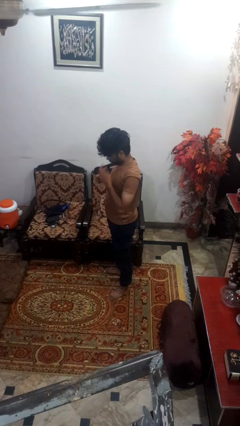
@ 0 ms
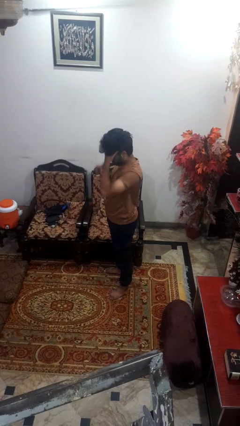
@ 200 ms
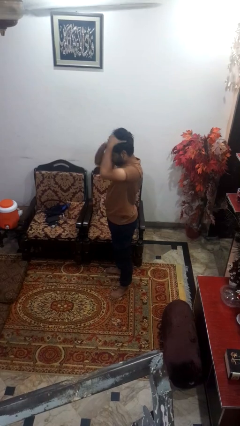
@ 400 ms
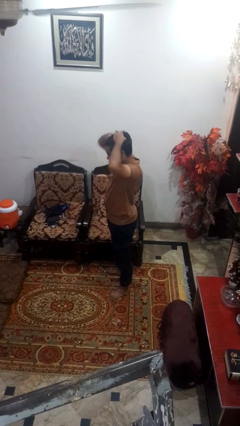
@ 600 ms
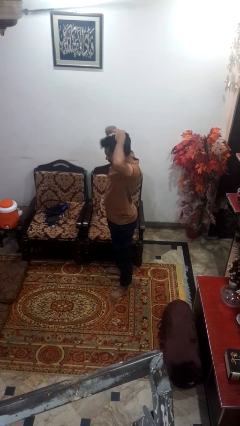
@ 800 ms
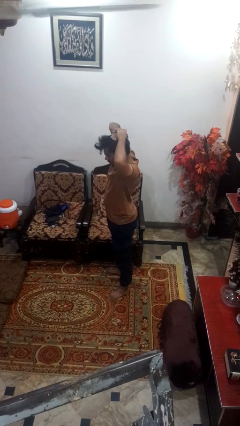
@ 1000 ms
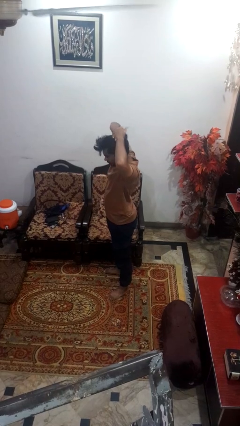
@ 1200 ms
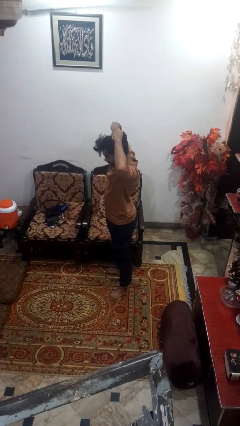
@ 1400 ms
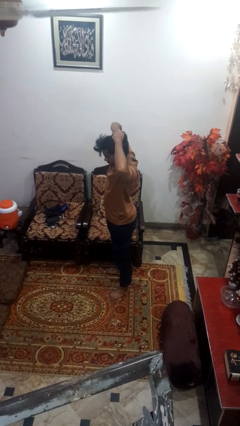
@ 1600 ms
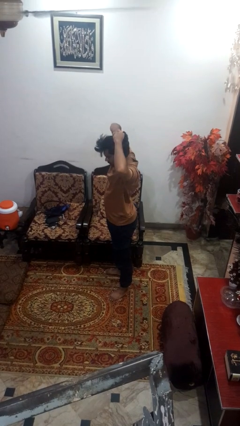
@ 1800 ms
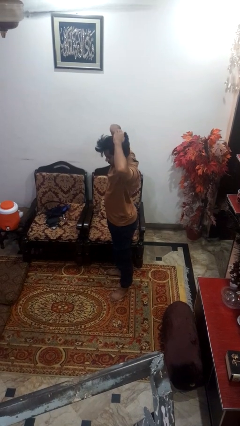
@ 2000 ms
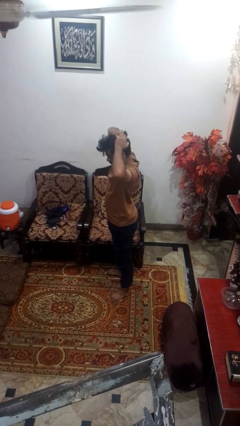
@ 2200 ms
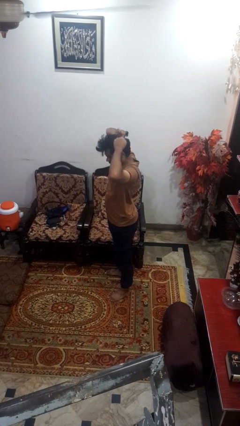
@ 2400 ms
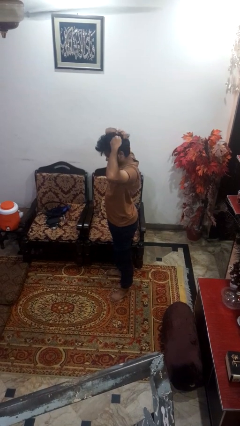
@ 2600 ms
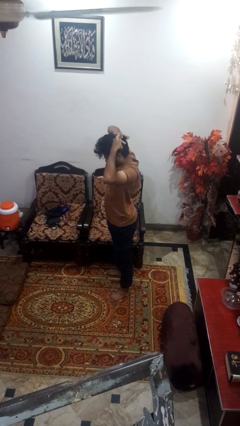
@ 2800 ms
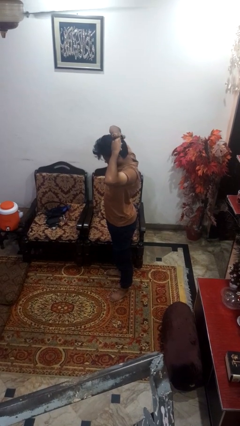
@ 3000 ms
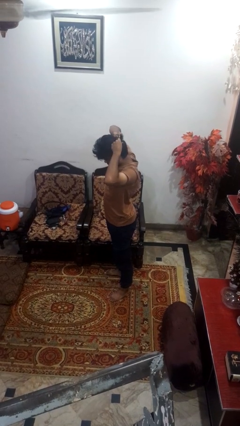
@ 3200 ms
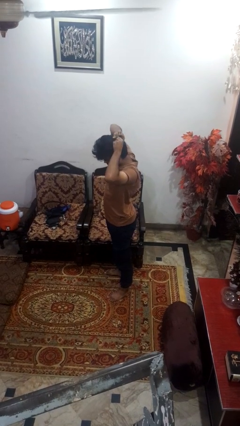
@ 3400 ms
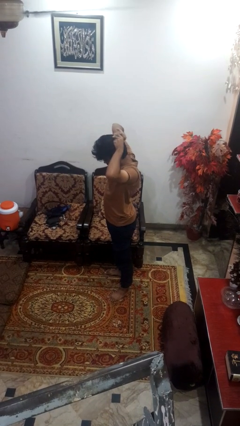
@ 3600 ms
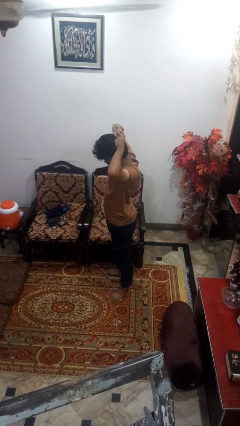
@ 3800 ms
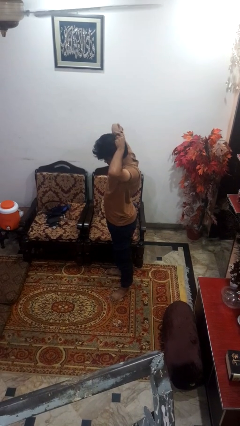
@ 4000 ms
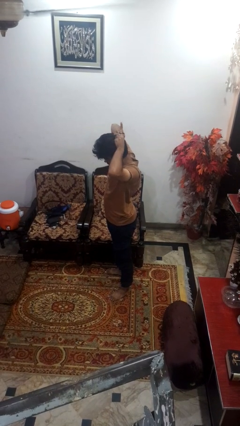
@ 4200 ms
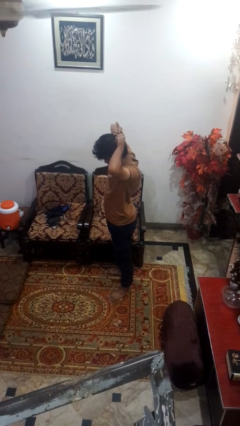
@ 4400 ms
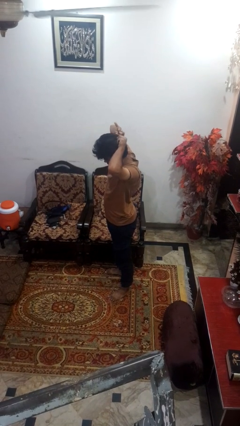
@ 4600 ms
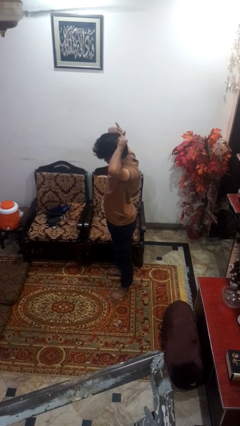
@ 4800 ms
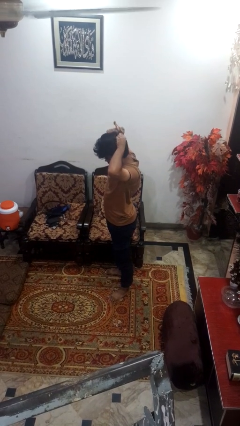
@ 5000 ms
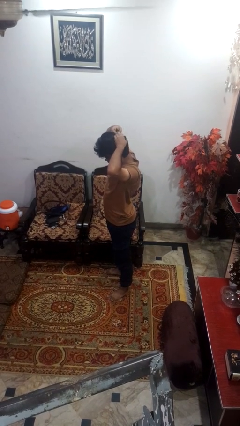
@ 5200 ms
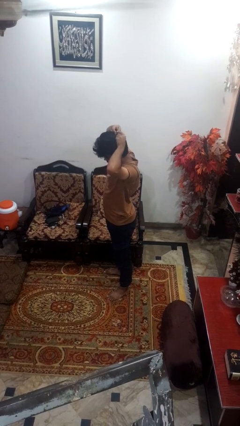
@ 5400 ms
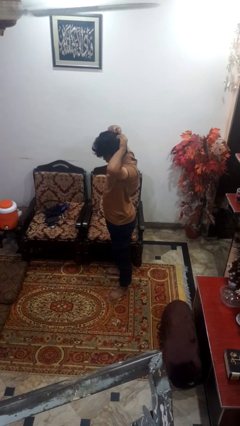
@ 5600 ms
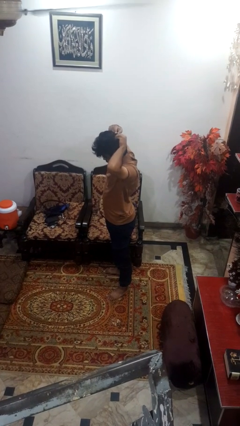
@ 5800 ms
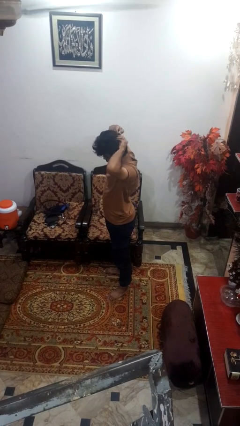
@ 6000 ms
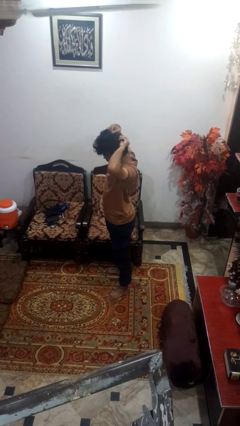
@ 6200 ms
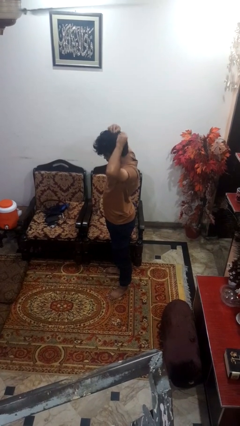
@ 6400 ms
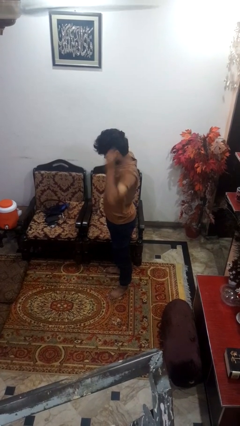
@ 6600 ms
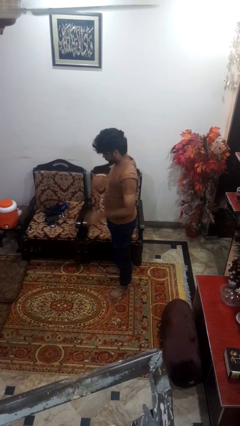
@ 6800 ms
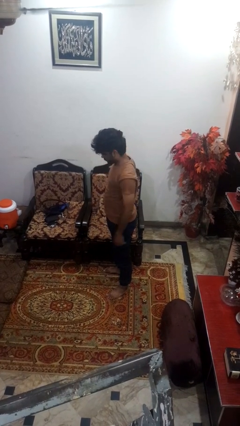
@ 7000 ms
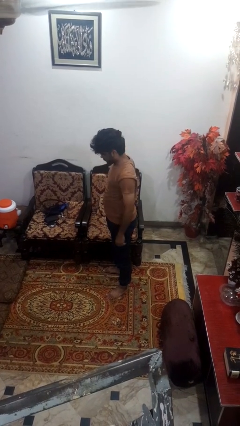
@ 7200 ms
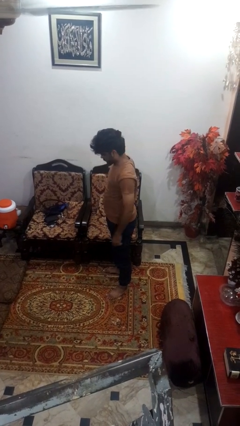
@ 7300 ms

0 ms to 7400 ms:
person puts hair in ponytail

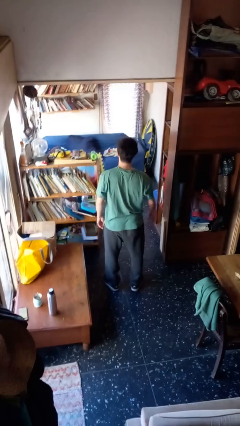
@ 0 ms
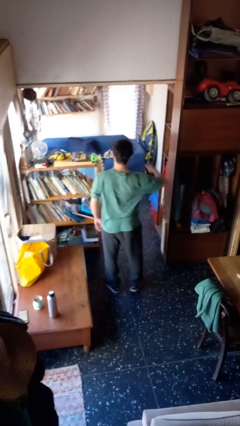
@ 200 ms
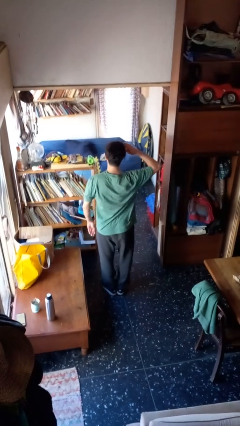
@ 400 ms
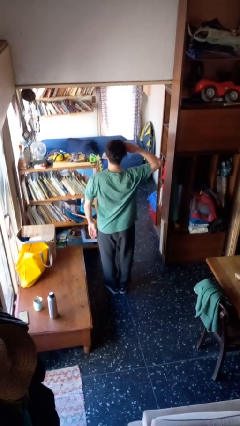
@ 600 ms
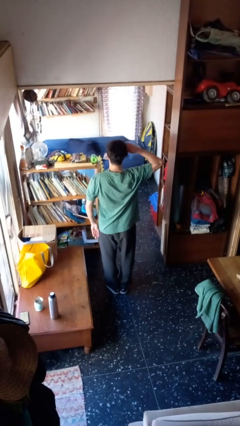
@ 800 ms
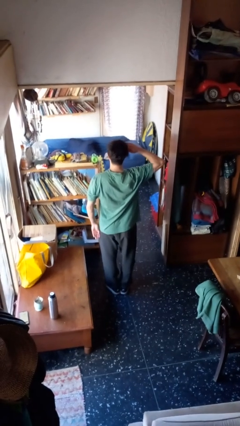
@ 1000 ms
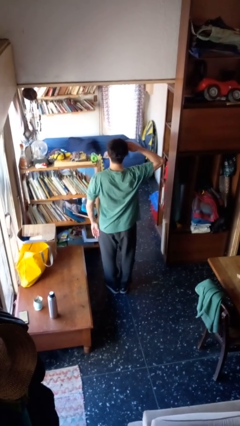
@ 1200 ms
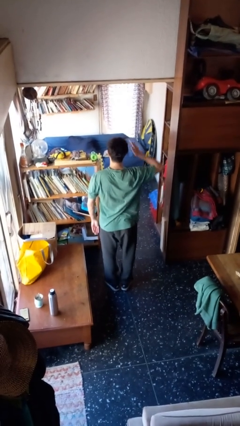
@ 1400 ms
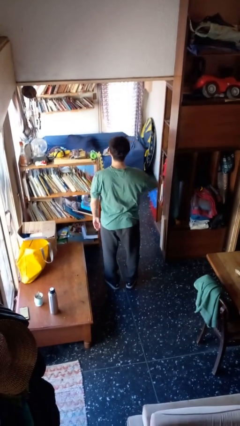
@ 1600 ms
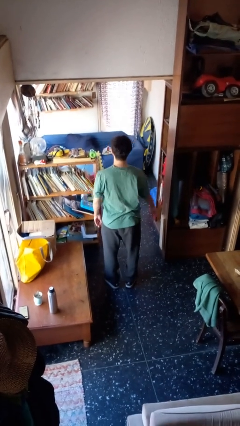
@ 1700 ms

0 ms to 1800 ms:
person salutes

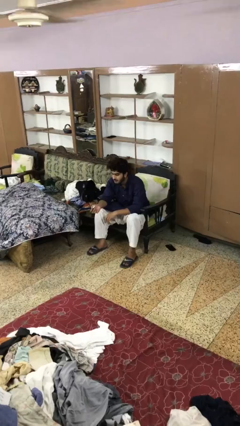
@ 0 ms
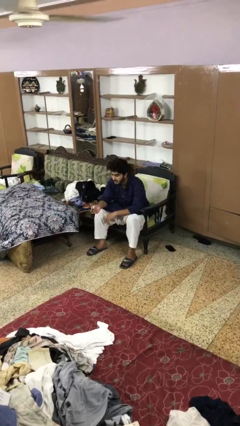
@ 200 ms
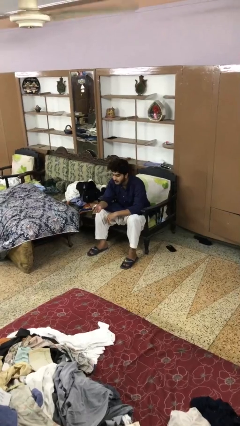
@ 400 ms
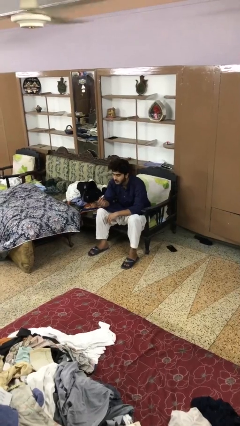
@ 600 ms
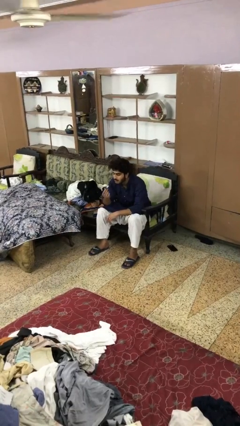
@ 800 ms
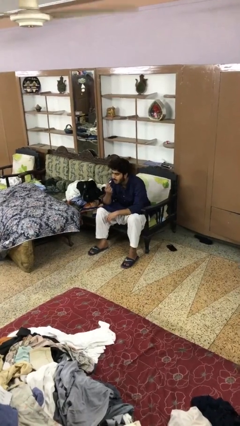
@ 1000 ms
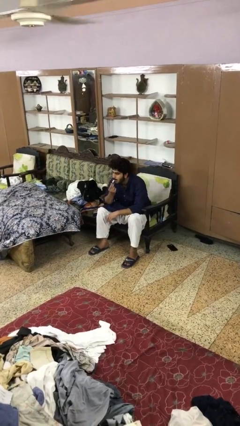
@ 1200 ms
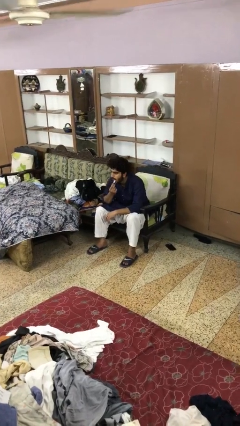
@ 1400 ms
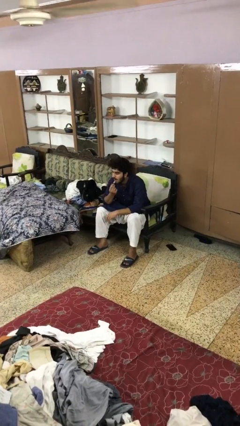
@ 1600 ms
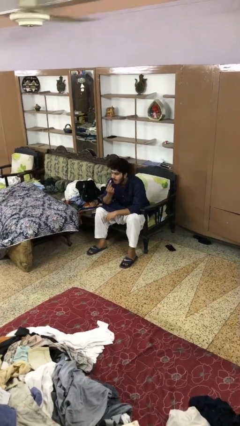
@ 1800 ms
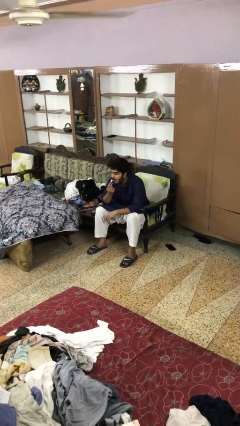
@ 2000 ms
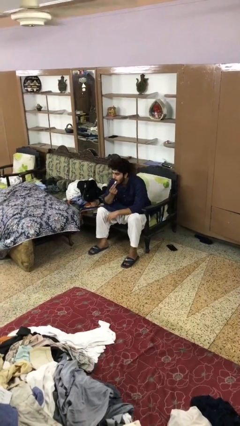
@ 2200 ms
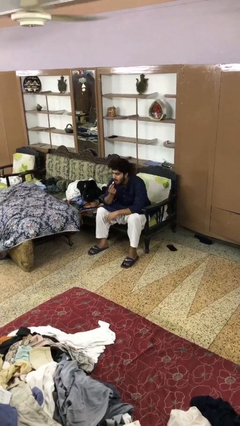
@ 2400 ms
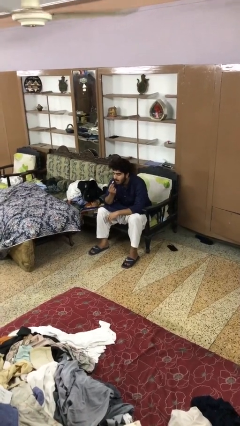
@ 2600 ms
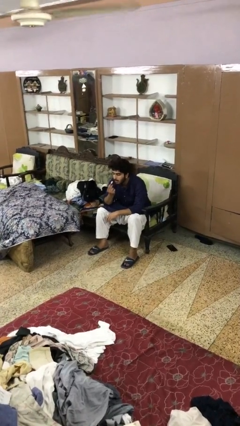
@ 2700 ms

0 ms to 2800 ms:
person applies lip makeup

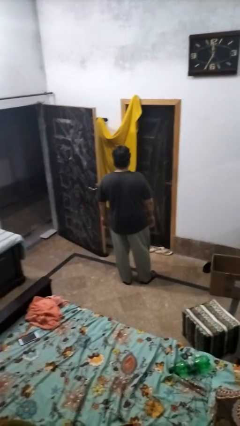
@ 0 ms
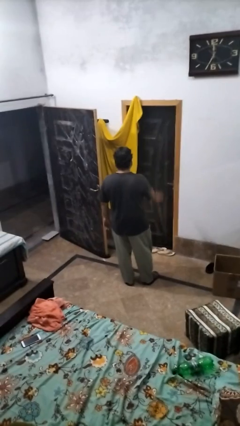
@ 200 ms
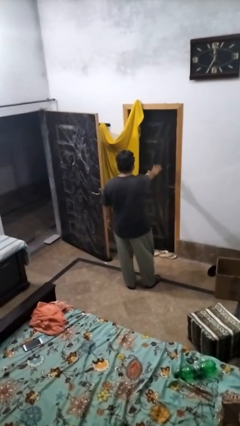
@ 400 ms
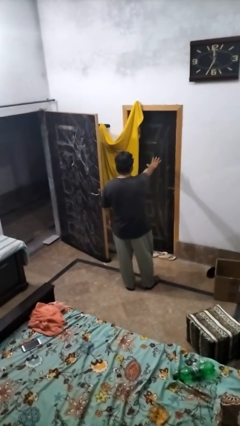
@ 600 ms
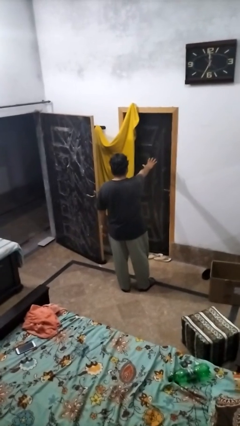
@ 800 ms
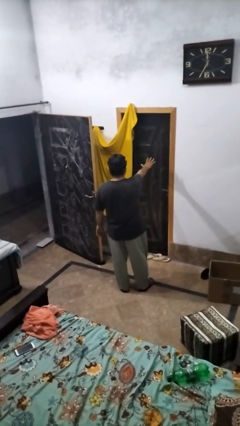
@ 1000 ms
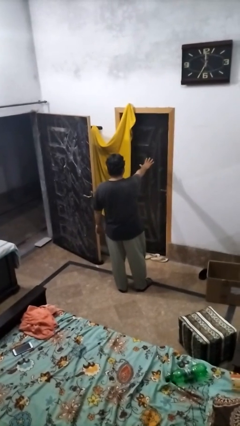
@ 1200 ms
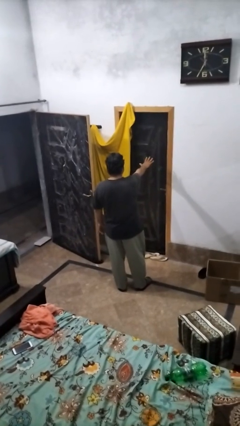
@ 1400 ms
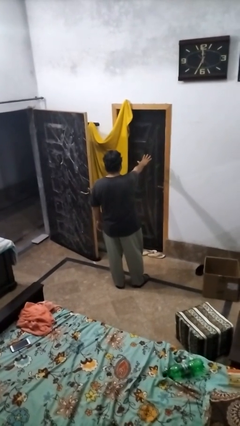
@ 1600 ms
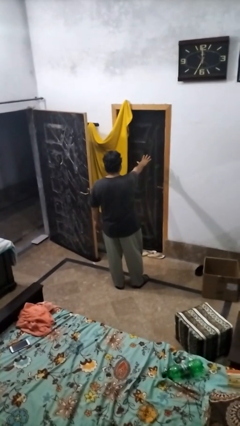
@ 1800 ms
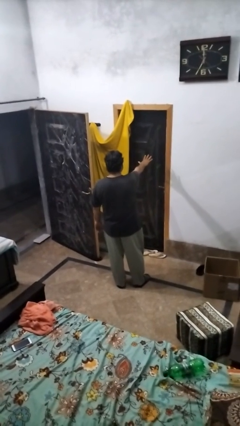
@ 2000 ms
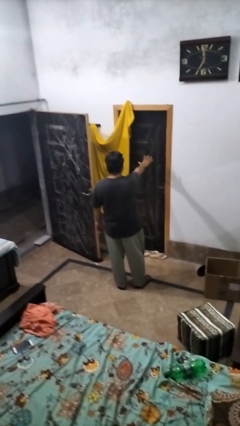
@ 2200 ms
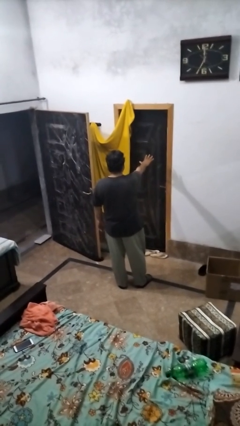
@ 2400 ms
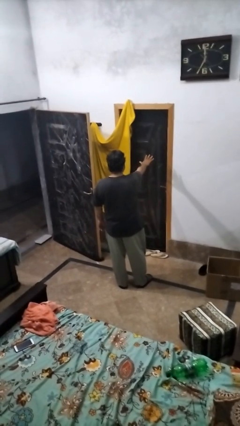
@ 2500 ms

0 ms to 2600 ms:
person gestures stop

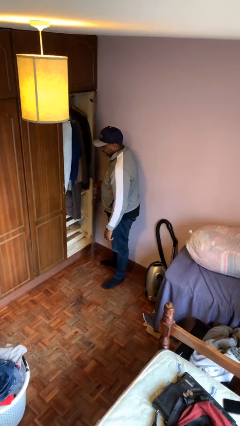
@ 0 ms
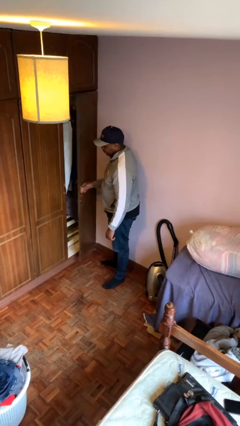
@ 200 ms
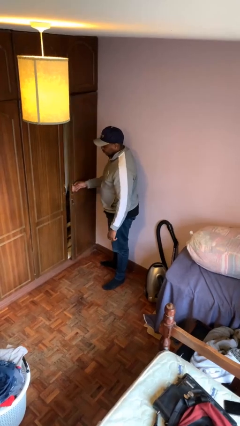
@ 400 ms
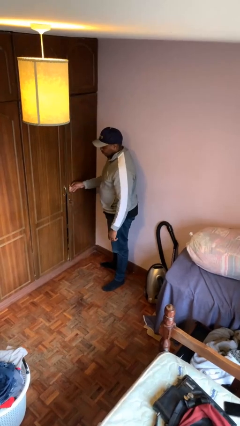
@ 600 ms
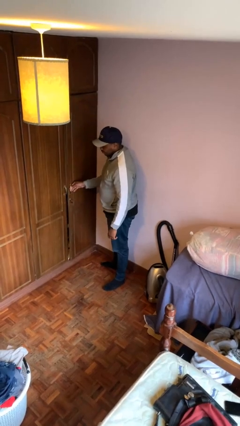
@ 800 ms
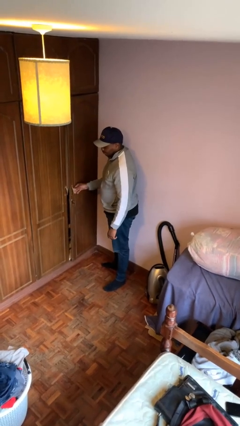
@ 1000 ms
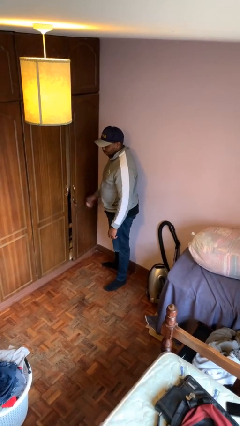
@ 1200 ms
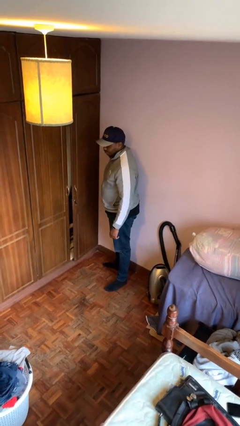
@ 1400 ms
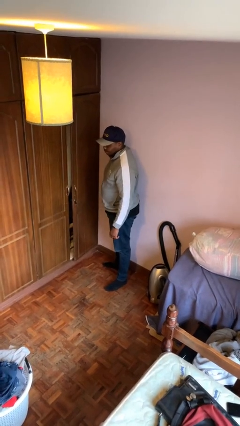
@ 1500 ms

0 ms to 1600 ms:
person closes closet door

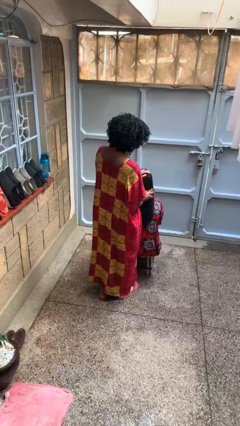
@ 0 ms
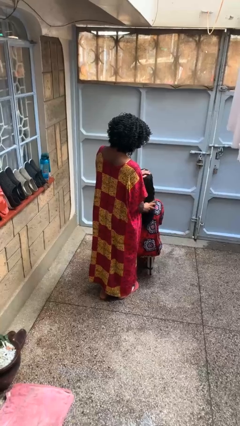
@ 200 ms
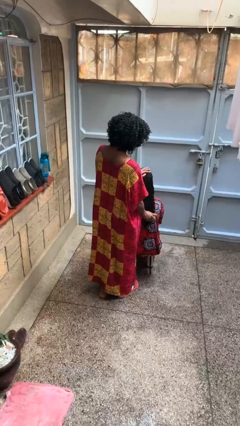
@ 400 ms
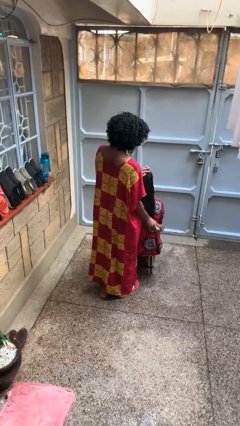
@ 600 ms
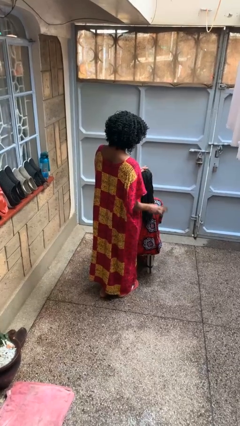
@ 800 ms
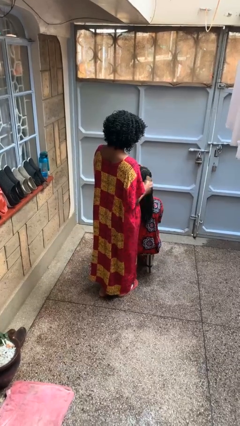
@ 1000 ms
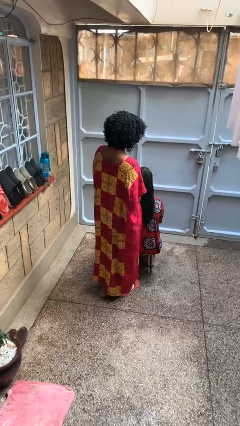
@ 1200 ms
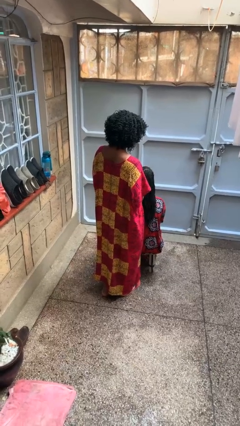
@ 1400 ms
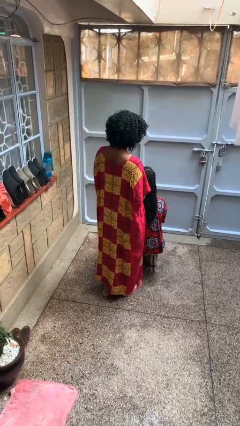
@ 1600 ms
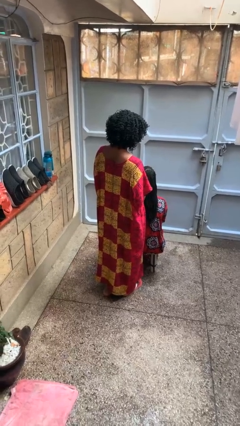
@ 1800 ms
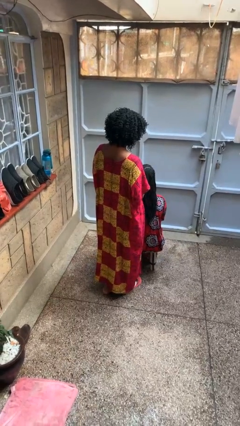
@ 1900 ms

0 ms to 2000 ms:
person brushes hair of person
